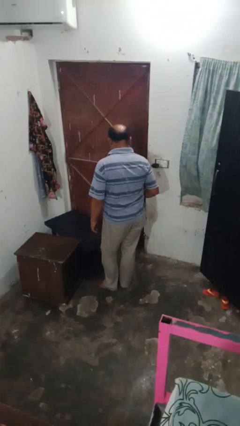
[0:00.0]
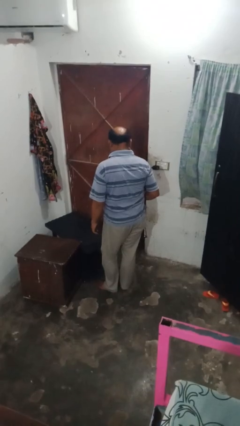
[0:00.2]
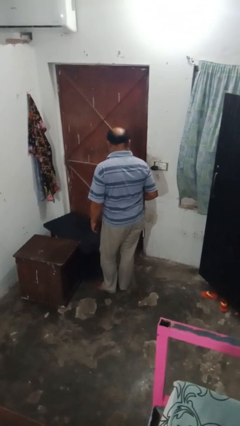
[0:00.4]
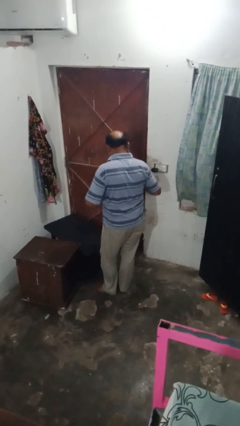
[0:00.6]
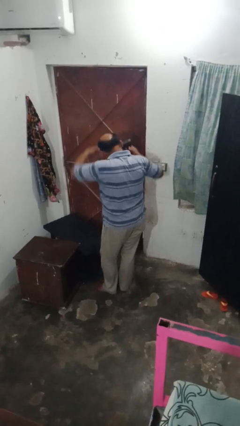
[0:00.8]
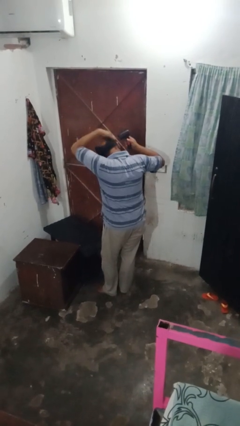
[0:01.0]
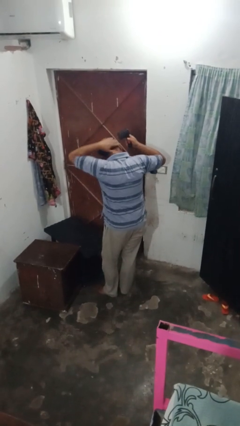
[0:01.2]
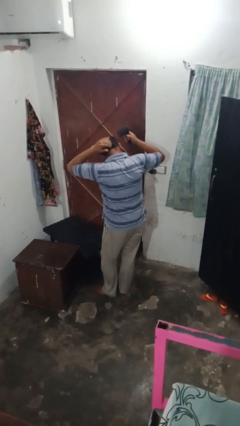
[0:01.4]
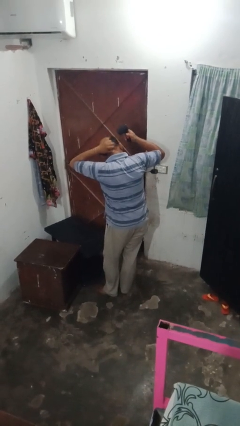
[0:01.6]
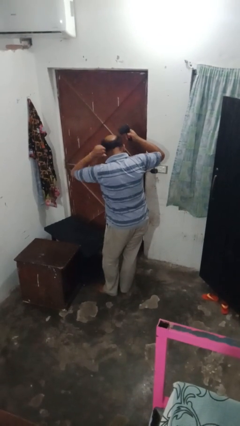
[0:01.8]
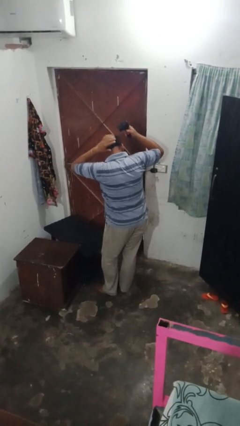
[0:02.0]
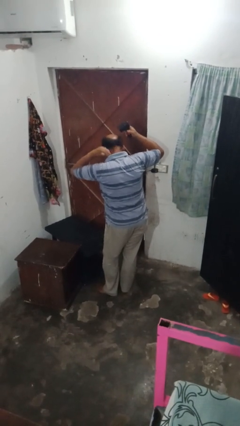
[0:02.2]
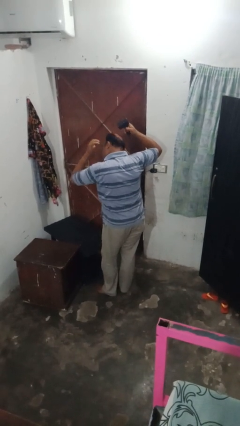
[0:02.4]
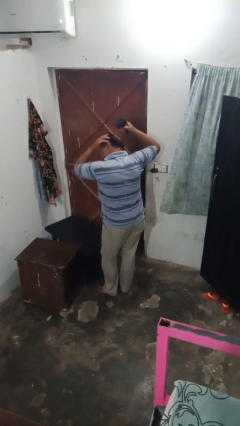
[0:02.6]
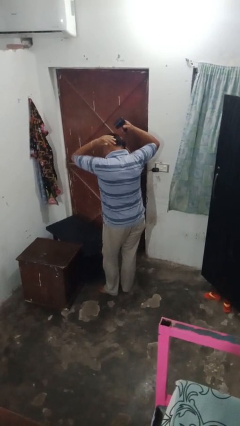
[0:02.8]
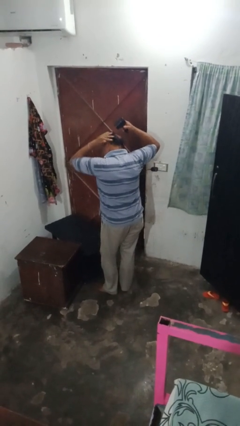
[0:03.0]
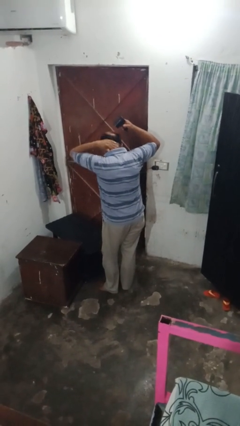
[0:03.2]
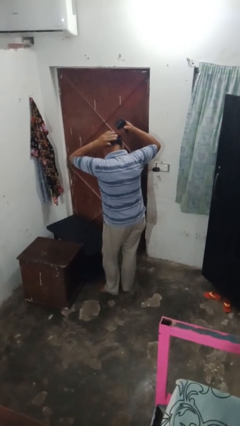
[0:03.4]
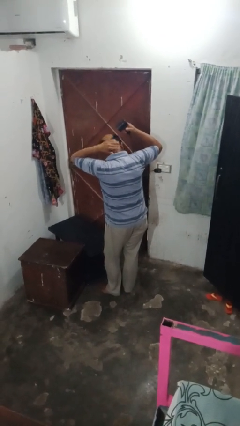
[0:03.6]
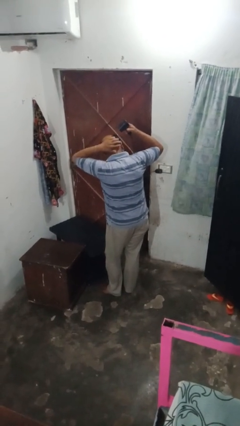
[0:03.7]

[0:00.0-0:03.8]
person dries hair with towel

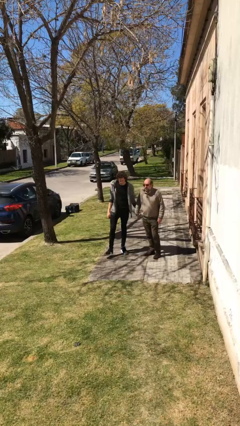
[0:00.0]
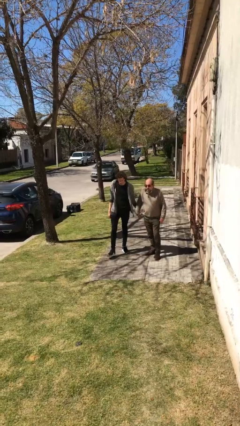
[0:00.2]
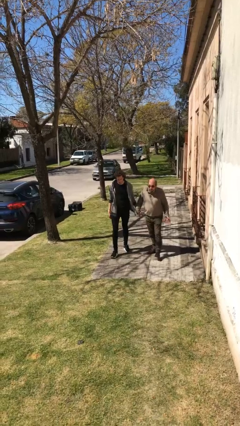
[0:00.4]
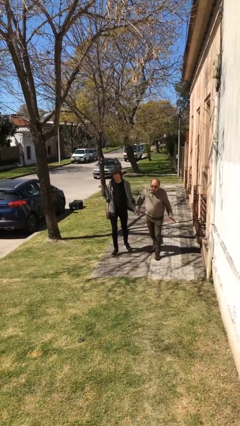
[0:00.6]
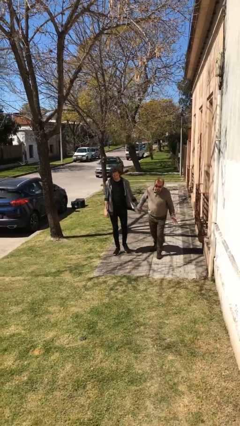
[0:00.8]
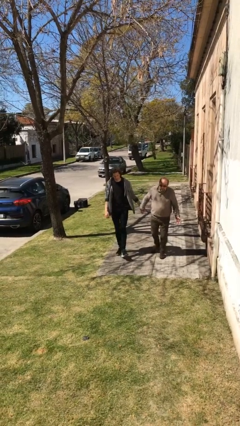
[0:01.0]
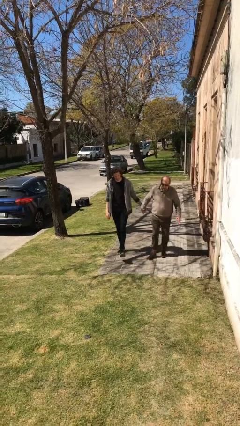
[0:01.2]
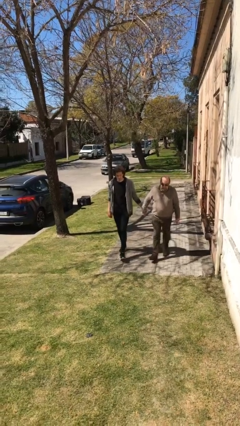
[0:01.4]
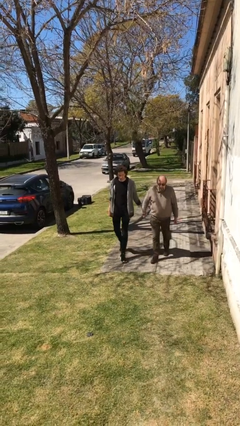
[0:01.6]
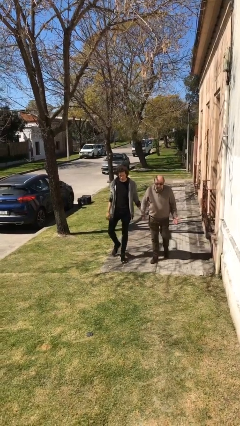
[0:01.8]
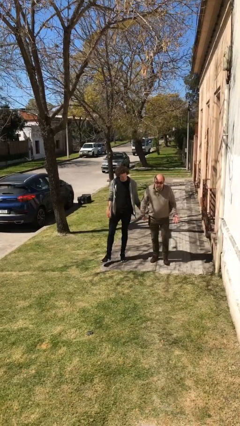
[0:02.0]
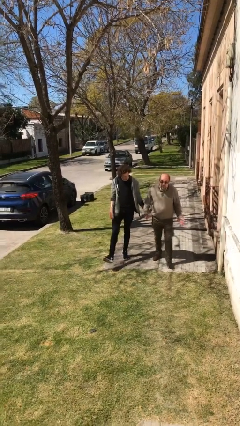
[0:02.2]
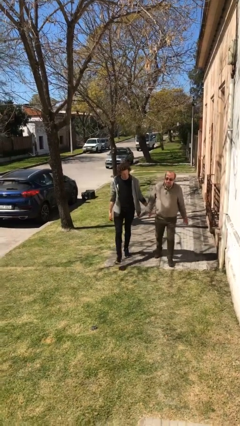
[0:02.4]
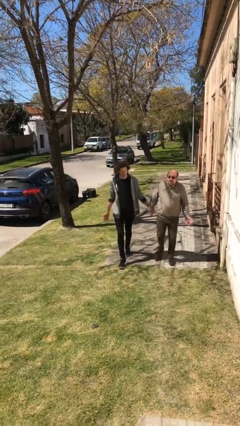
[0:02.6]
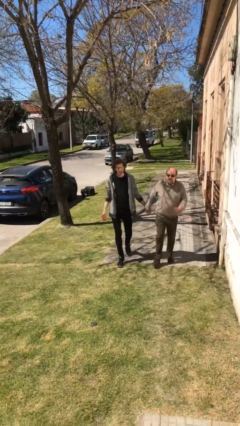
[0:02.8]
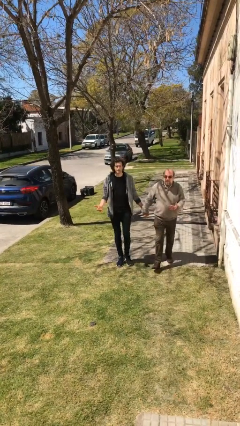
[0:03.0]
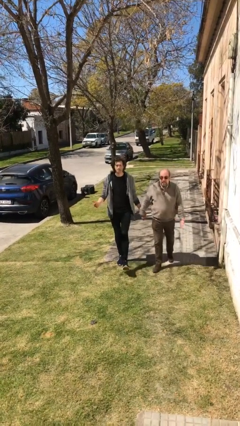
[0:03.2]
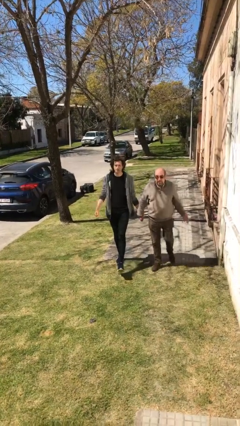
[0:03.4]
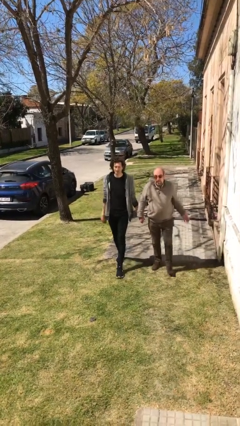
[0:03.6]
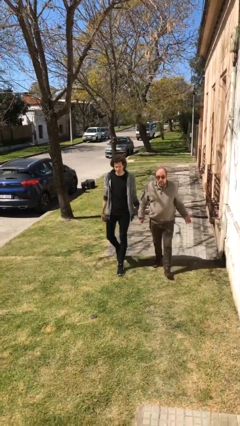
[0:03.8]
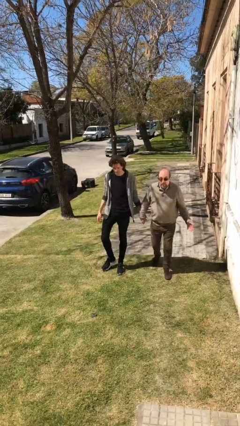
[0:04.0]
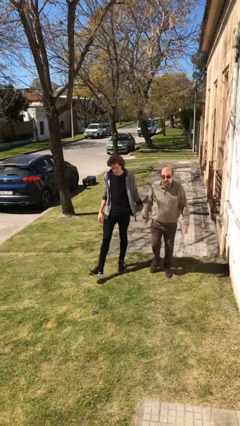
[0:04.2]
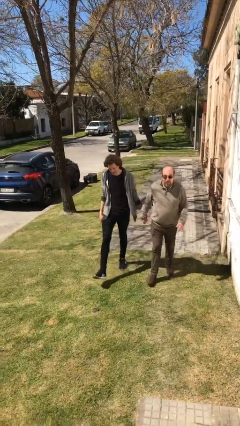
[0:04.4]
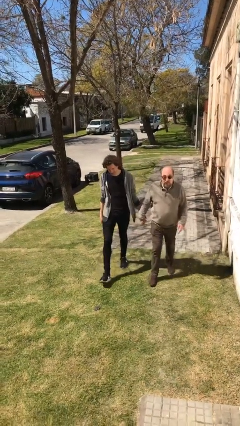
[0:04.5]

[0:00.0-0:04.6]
person holds hand

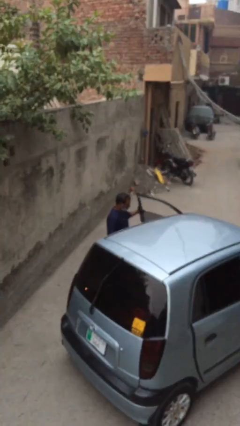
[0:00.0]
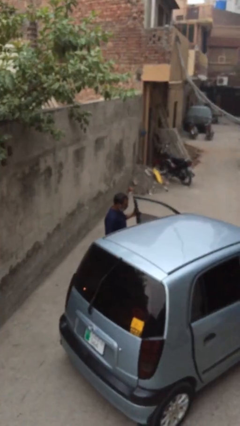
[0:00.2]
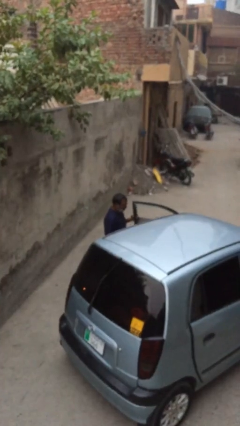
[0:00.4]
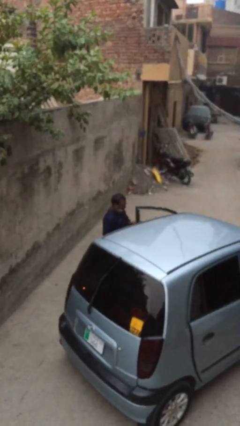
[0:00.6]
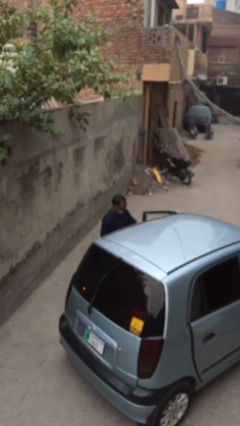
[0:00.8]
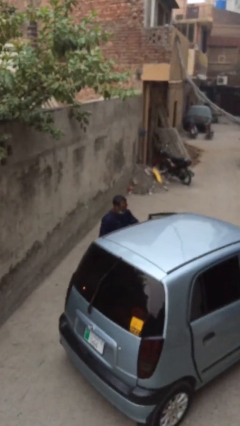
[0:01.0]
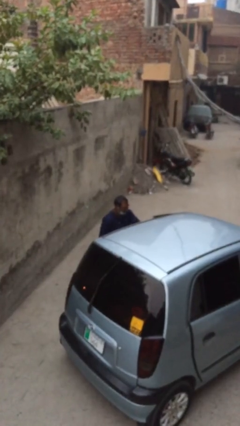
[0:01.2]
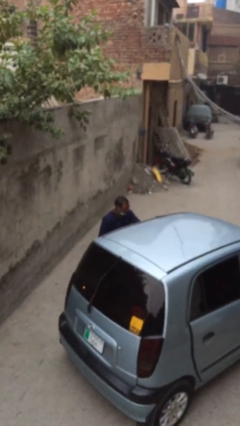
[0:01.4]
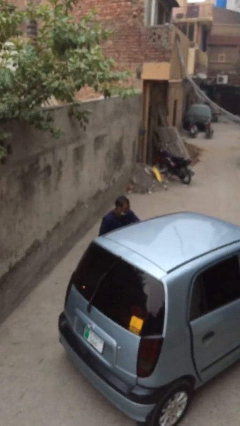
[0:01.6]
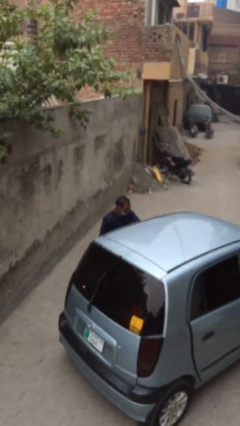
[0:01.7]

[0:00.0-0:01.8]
person closes car door

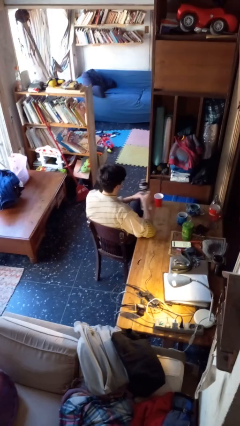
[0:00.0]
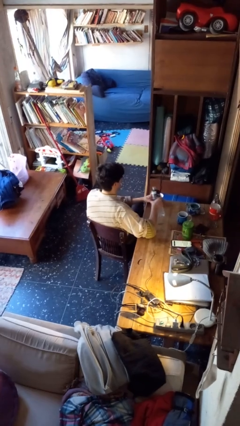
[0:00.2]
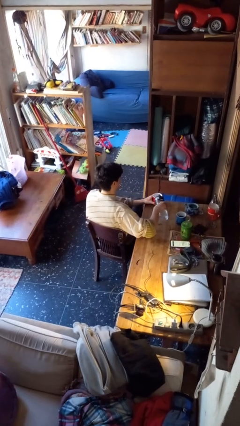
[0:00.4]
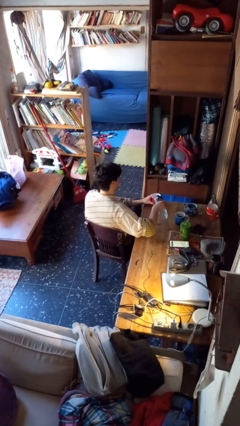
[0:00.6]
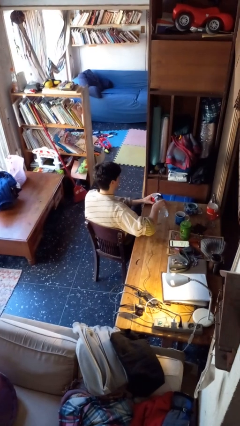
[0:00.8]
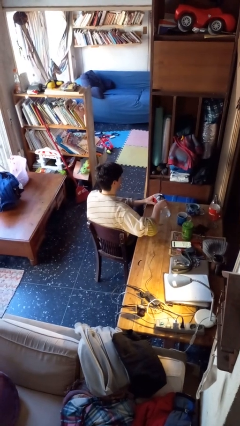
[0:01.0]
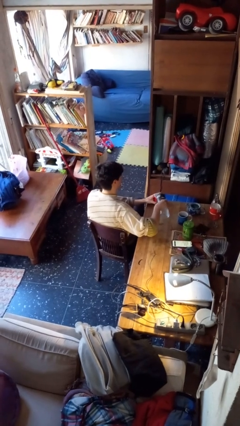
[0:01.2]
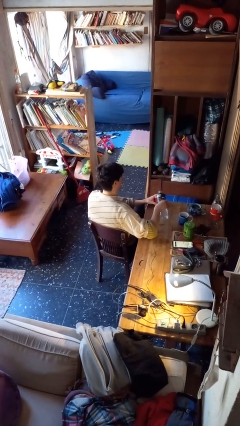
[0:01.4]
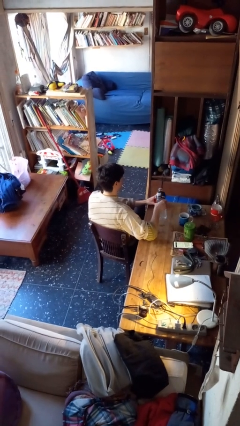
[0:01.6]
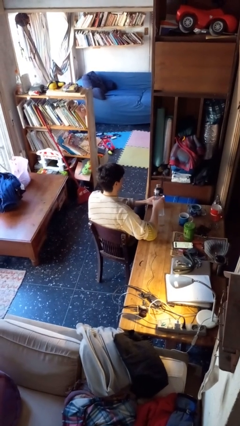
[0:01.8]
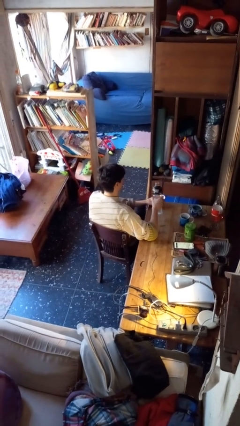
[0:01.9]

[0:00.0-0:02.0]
person pours liquid into cup

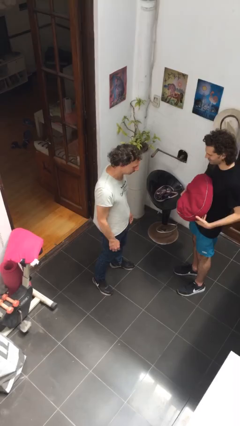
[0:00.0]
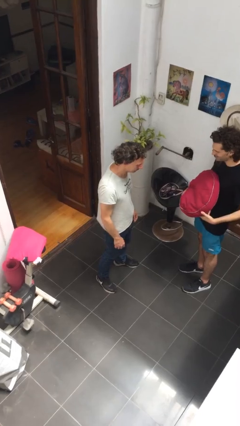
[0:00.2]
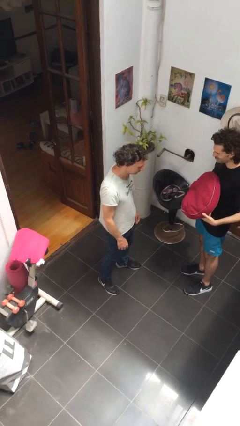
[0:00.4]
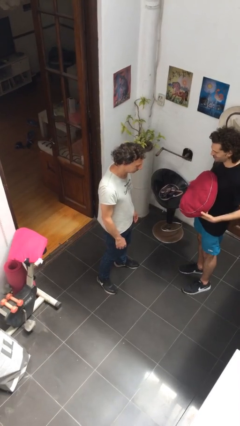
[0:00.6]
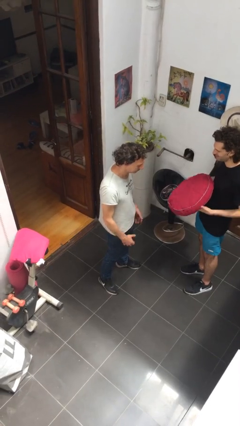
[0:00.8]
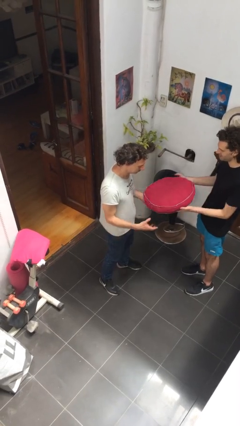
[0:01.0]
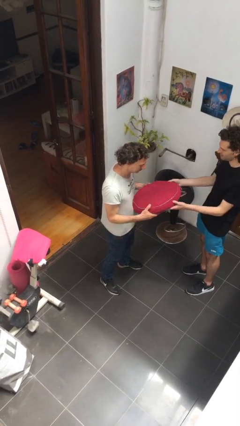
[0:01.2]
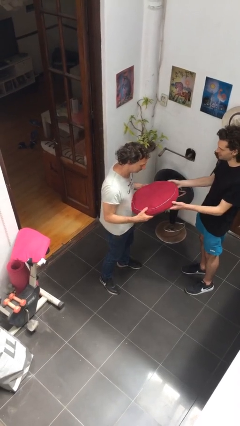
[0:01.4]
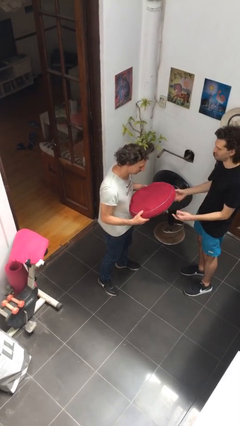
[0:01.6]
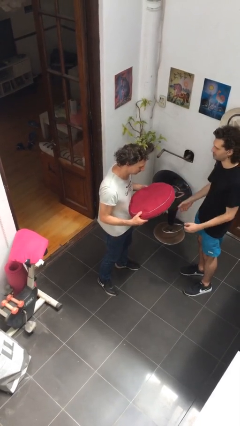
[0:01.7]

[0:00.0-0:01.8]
person transfers object to person

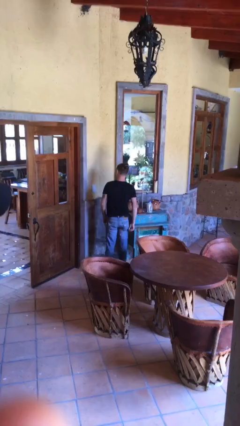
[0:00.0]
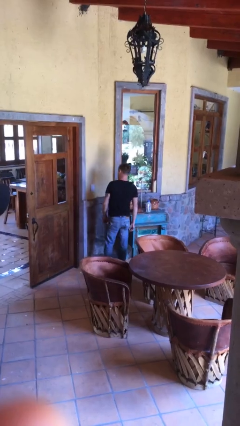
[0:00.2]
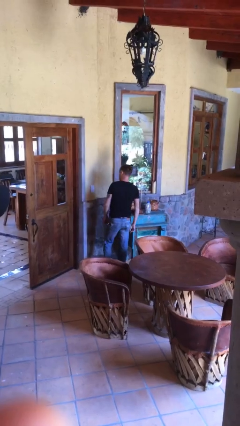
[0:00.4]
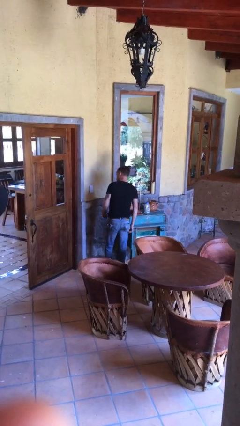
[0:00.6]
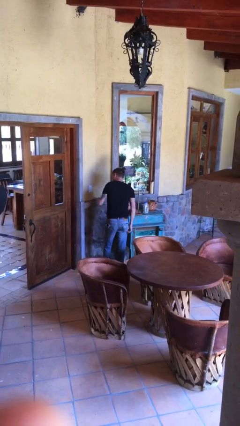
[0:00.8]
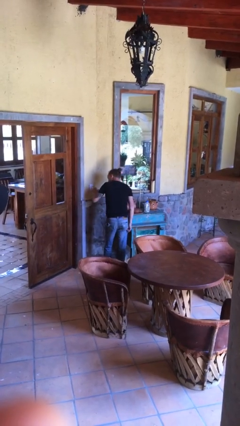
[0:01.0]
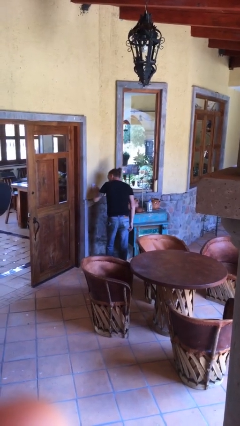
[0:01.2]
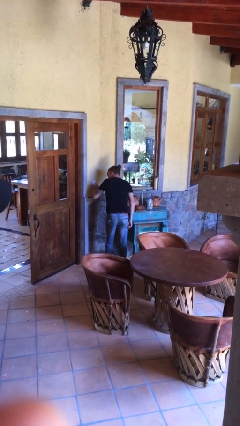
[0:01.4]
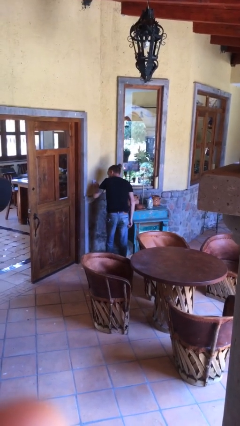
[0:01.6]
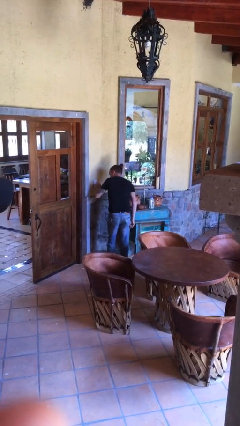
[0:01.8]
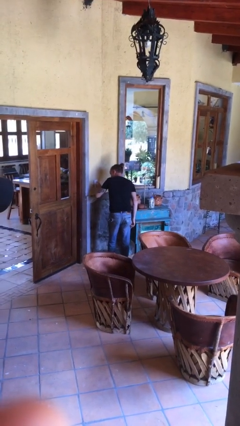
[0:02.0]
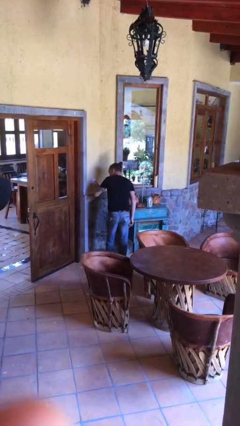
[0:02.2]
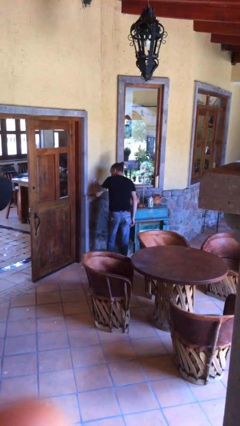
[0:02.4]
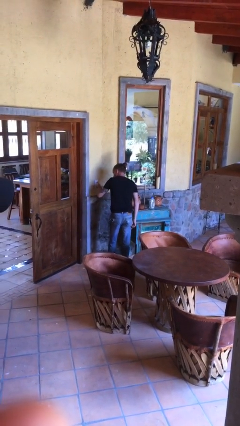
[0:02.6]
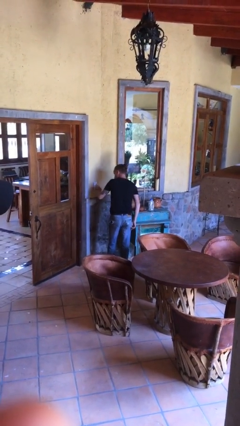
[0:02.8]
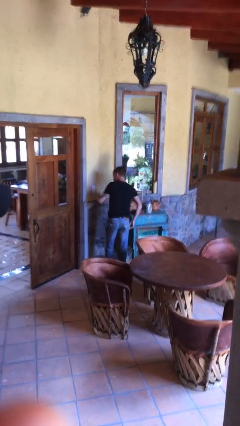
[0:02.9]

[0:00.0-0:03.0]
person adjusts thermostat

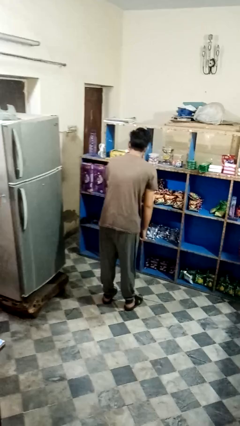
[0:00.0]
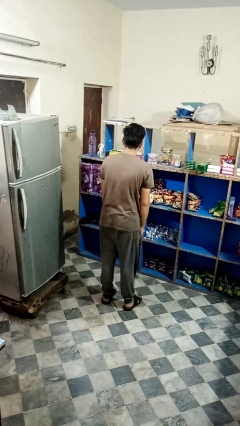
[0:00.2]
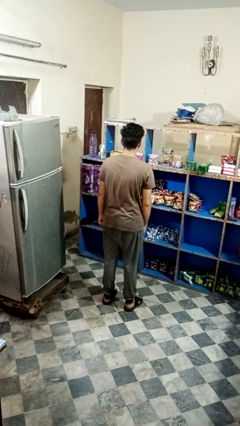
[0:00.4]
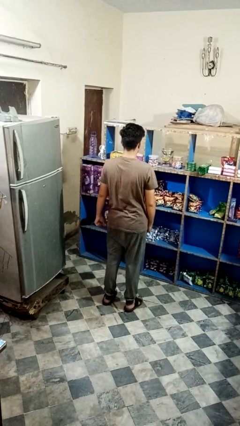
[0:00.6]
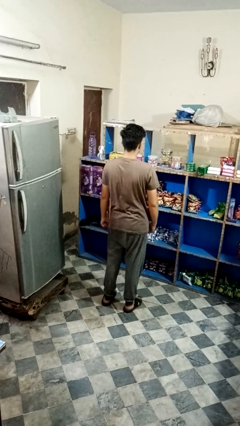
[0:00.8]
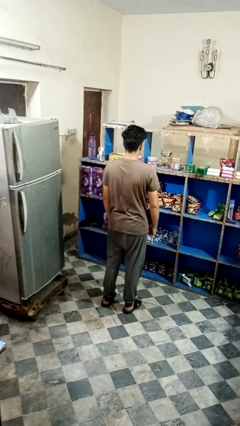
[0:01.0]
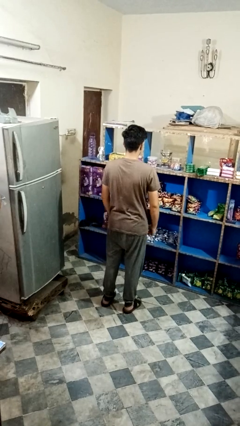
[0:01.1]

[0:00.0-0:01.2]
person wiggles hips
